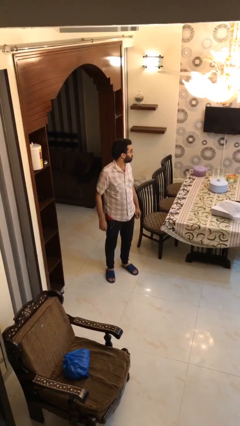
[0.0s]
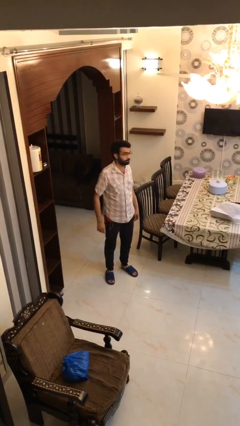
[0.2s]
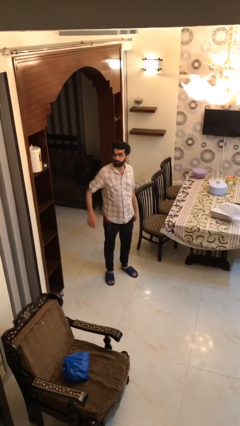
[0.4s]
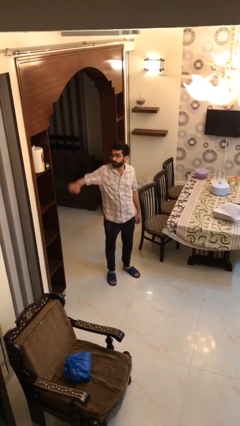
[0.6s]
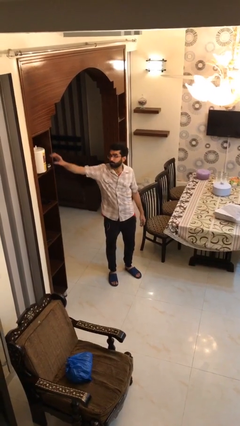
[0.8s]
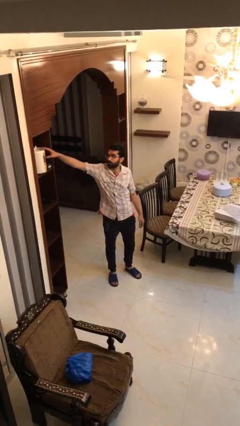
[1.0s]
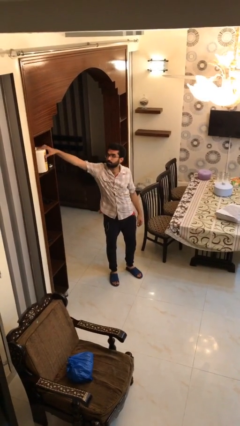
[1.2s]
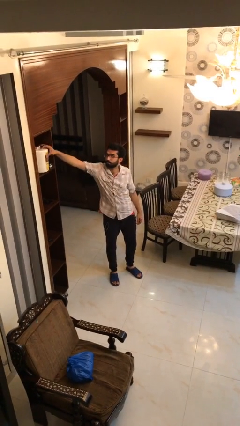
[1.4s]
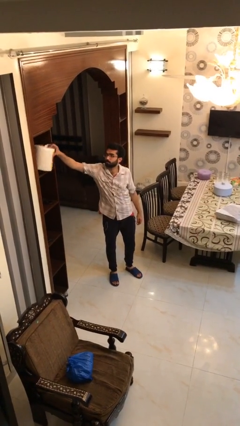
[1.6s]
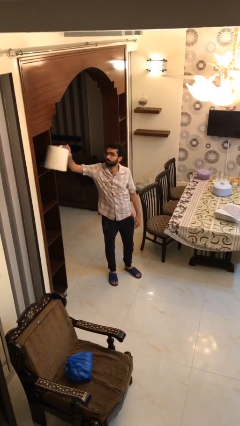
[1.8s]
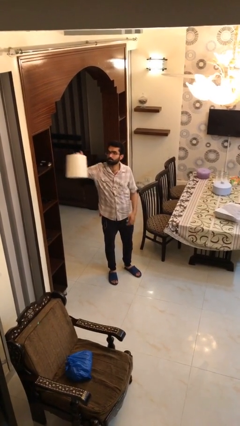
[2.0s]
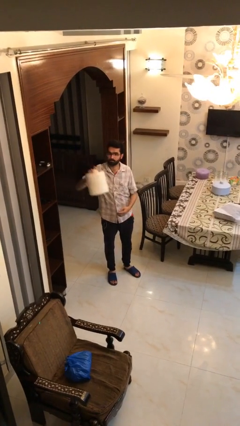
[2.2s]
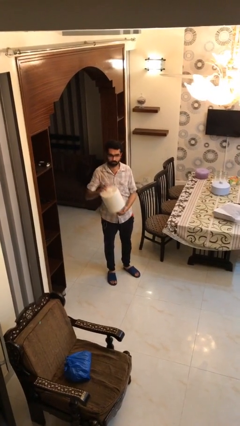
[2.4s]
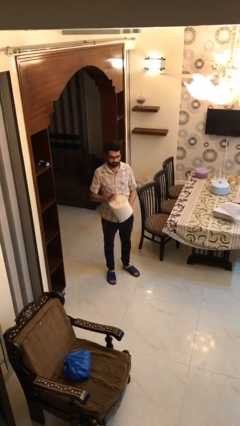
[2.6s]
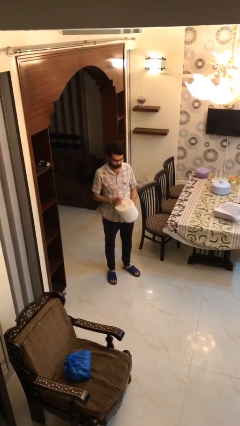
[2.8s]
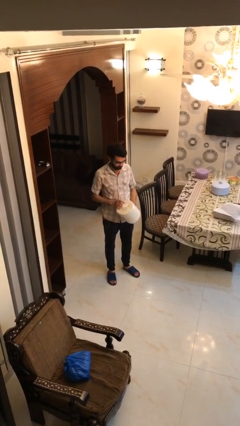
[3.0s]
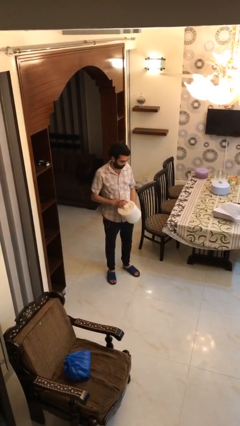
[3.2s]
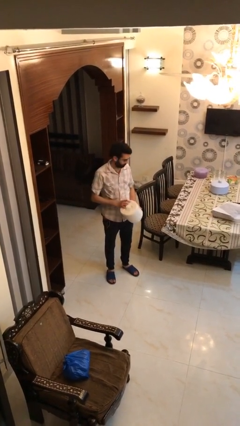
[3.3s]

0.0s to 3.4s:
person picks up object from shelf

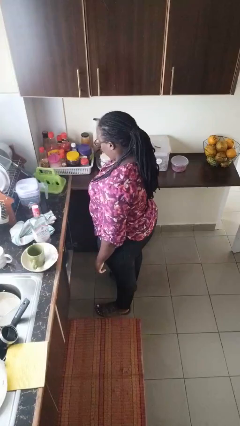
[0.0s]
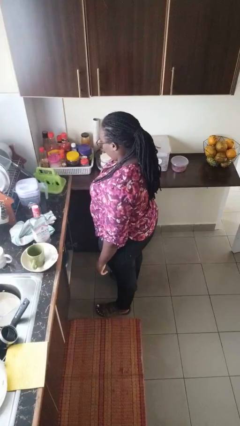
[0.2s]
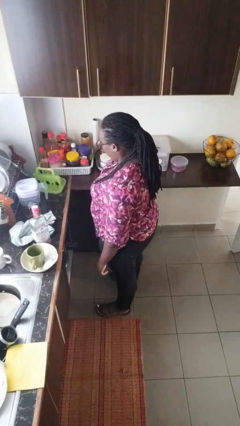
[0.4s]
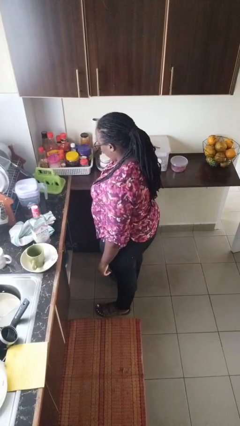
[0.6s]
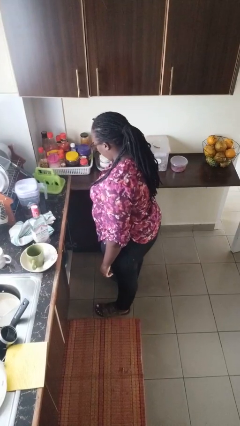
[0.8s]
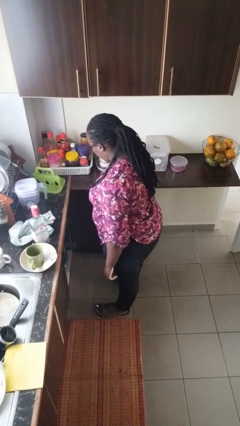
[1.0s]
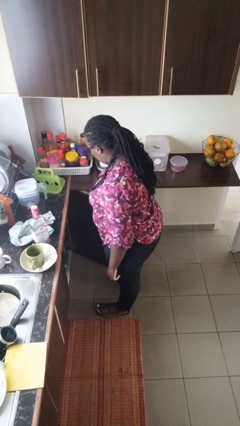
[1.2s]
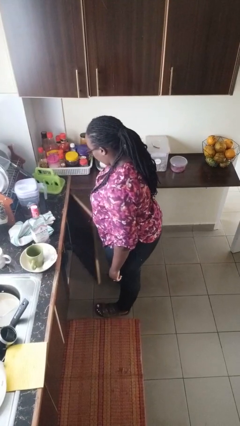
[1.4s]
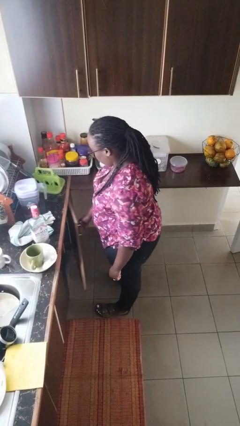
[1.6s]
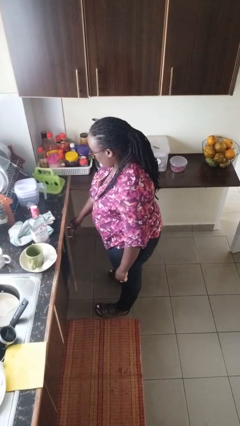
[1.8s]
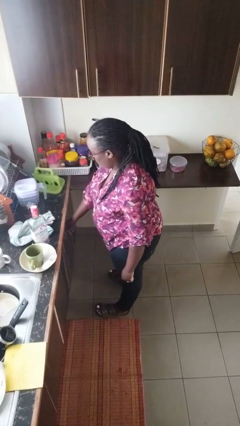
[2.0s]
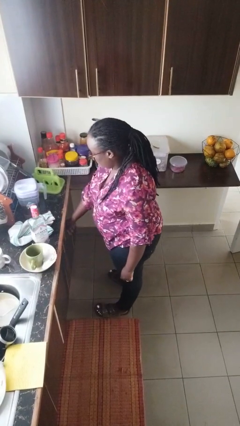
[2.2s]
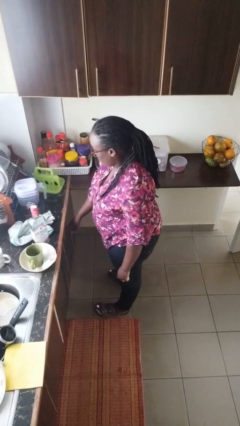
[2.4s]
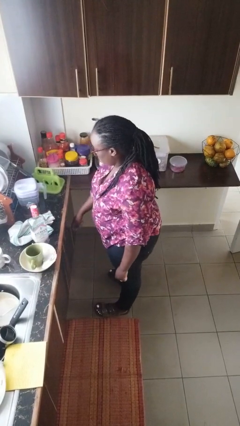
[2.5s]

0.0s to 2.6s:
person closes cabinet

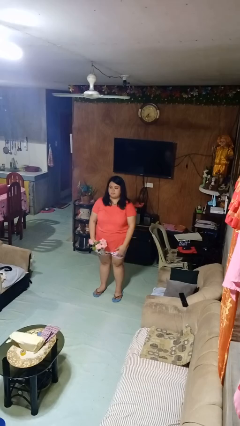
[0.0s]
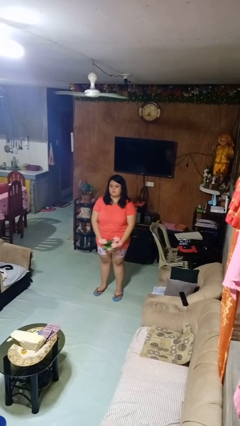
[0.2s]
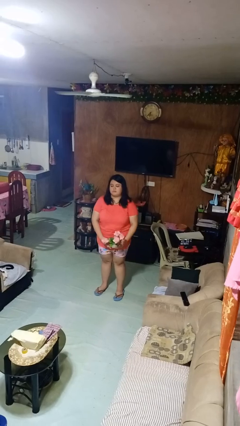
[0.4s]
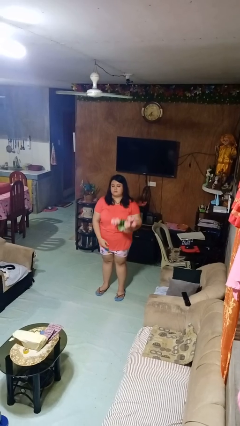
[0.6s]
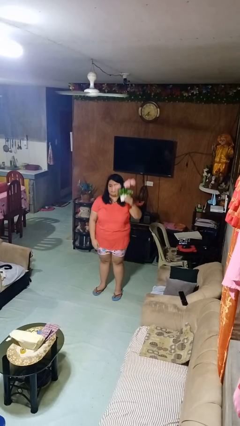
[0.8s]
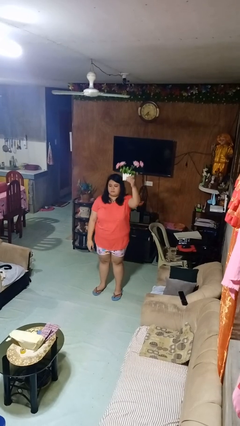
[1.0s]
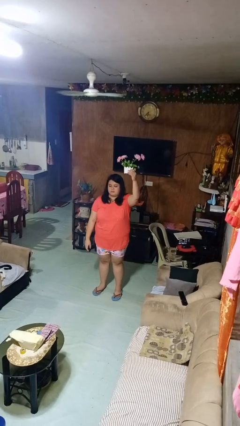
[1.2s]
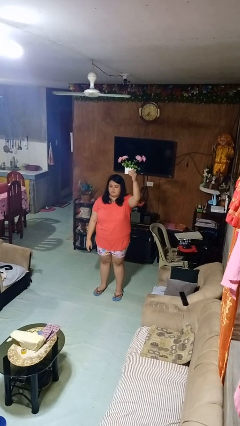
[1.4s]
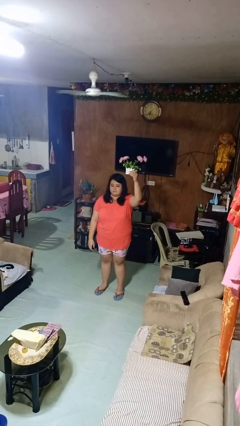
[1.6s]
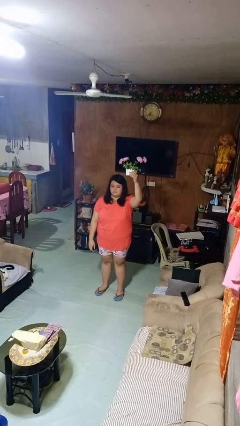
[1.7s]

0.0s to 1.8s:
person holds object above head

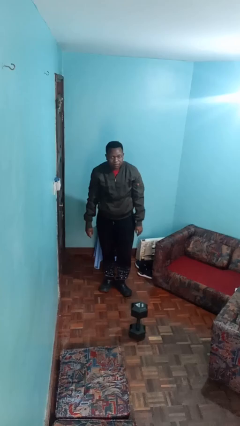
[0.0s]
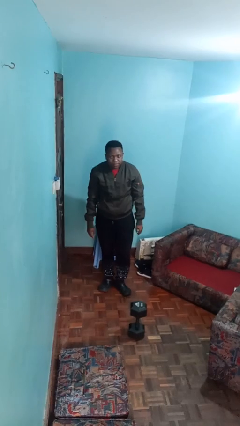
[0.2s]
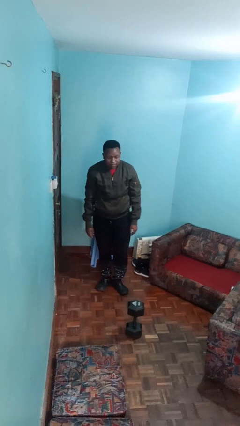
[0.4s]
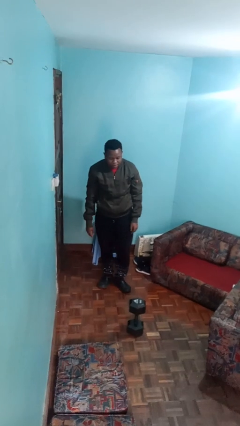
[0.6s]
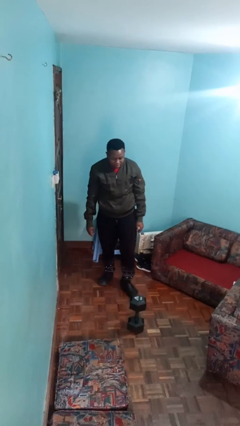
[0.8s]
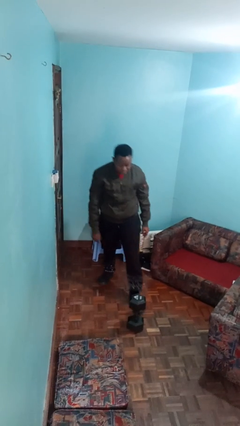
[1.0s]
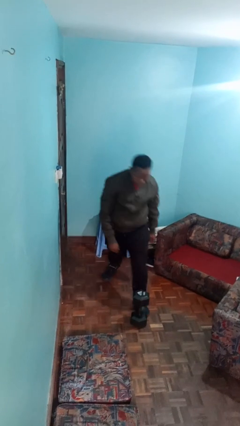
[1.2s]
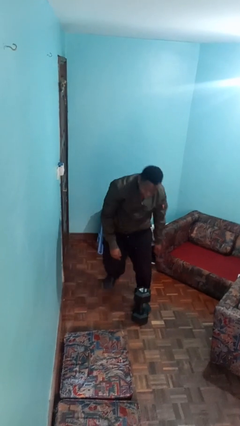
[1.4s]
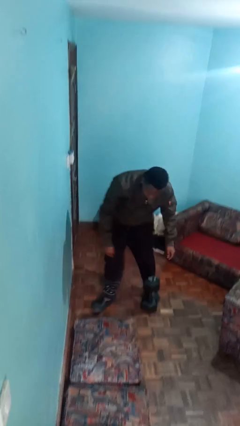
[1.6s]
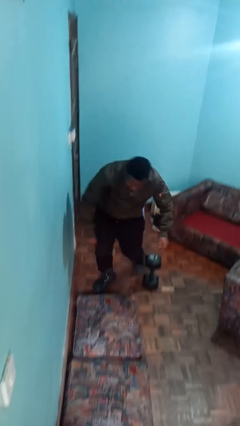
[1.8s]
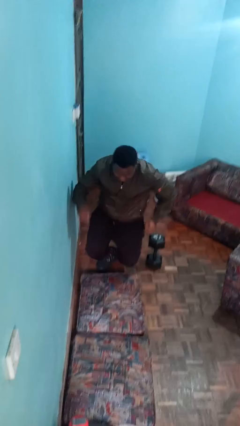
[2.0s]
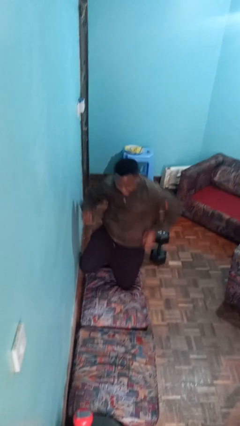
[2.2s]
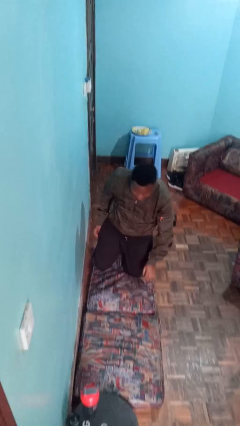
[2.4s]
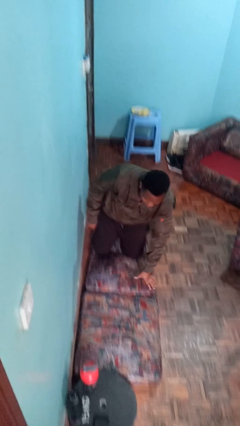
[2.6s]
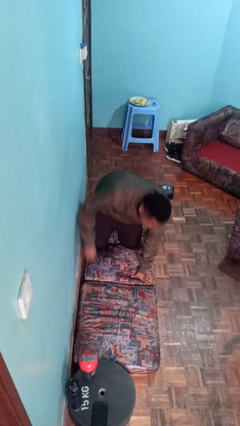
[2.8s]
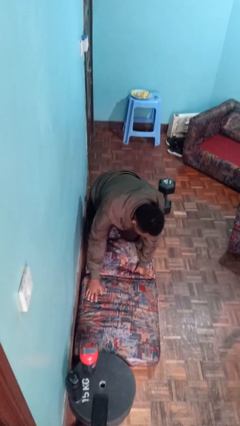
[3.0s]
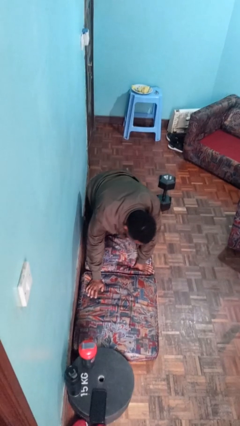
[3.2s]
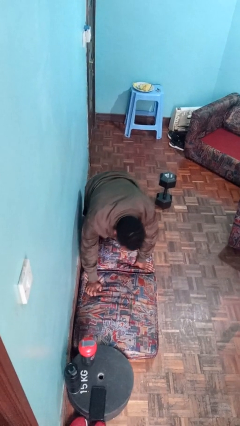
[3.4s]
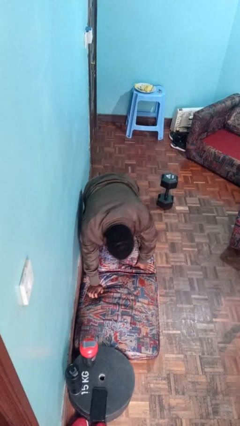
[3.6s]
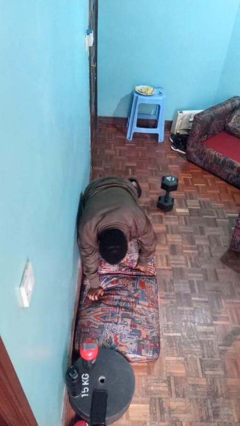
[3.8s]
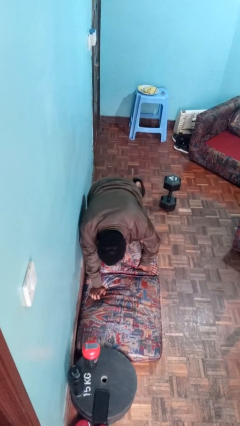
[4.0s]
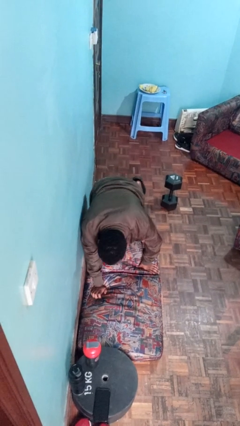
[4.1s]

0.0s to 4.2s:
person trips on object on floor

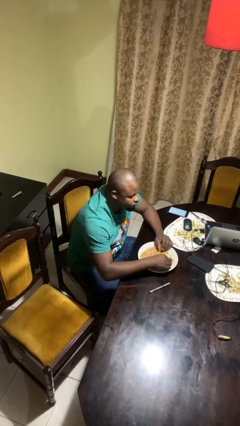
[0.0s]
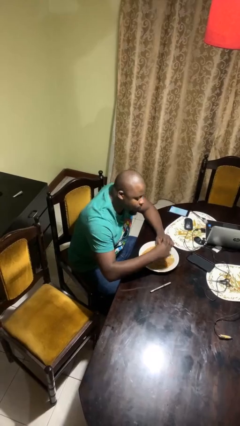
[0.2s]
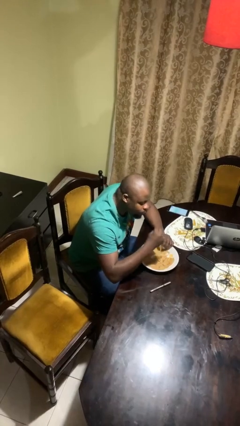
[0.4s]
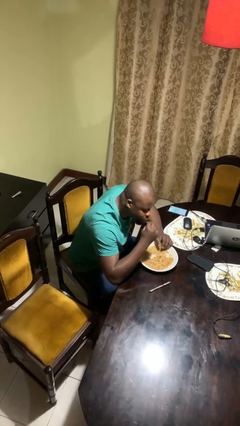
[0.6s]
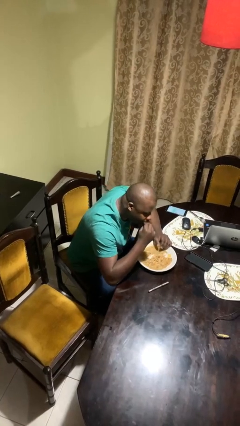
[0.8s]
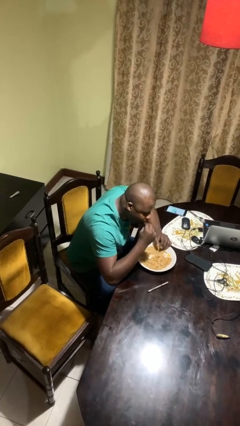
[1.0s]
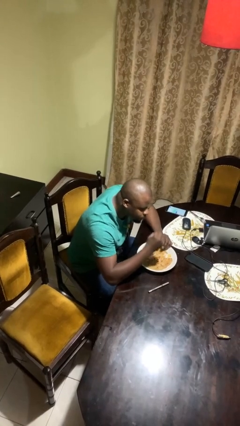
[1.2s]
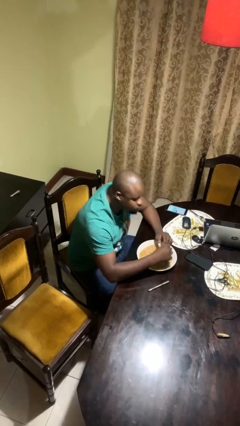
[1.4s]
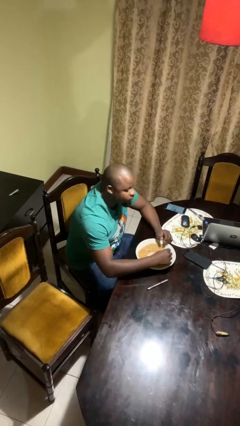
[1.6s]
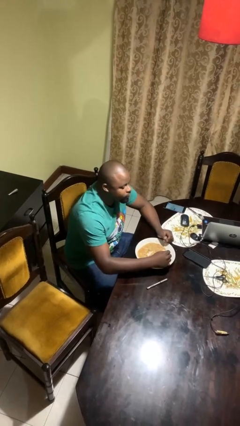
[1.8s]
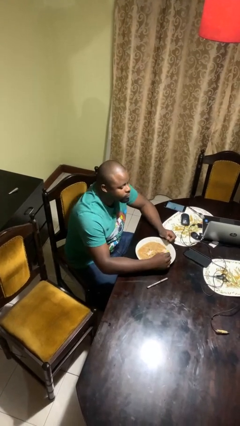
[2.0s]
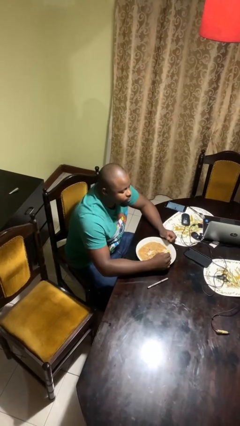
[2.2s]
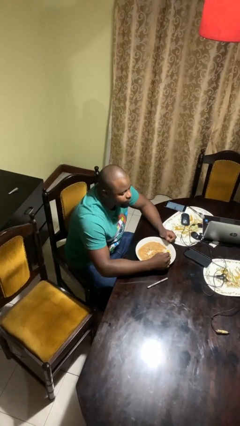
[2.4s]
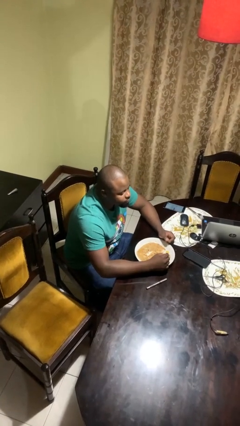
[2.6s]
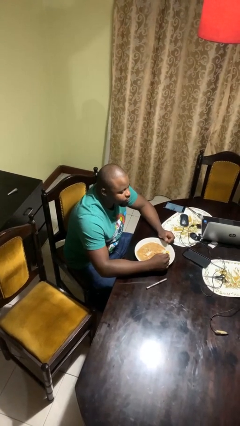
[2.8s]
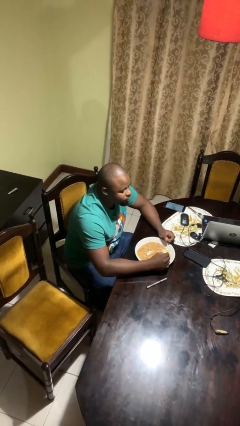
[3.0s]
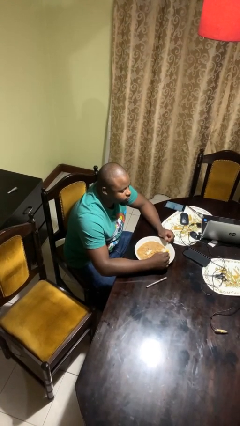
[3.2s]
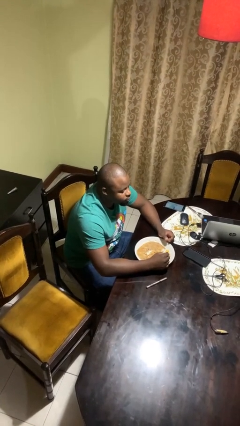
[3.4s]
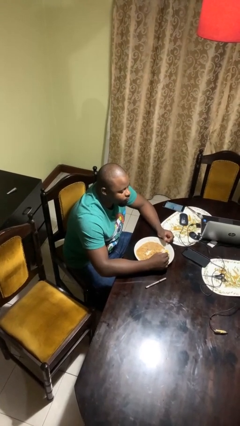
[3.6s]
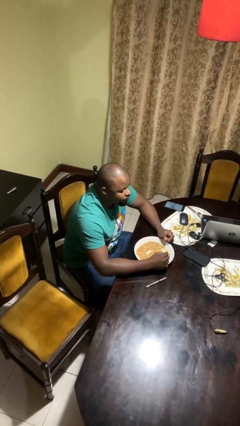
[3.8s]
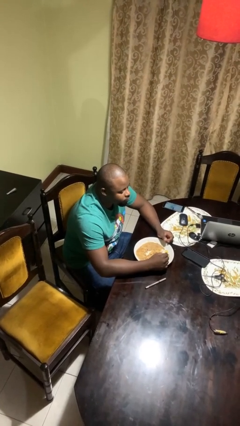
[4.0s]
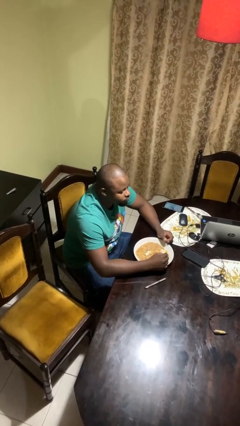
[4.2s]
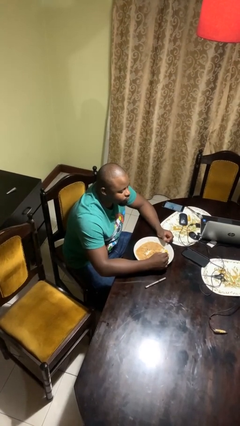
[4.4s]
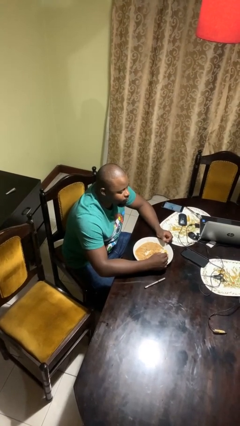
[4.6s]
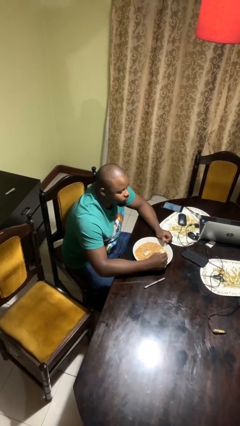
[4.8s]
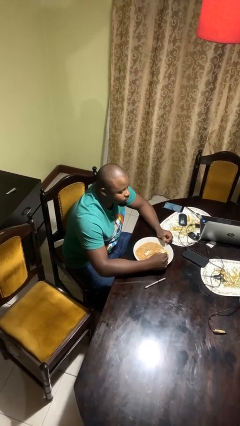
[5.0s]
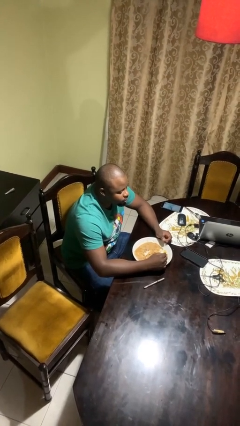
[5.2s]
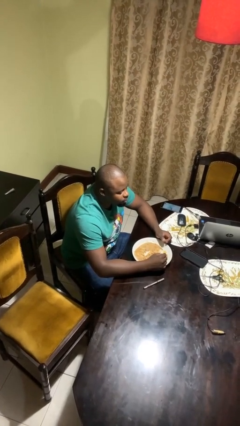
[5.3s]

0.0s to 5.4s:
person eats with hands

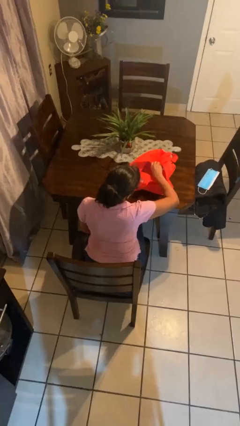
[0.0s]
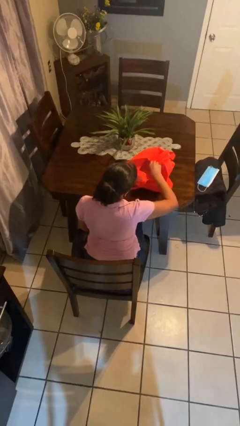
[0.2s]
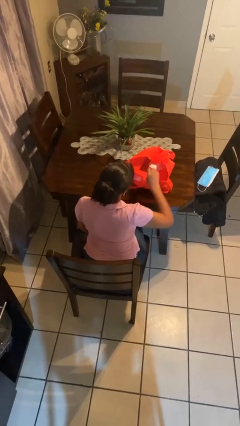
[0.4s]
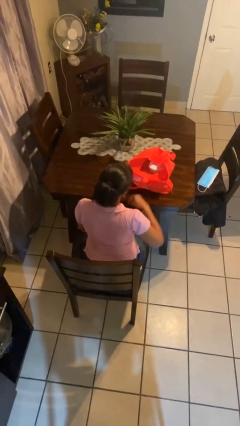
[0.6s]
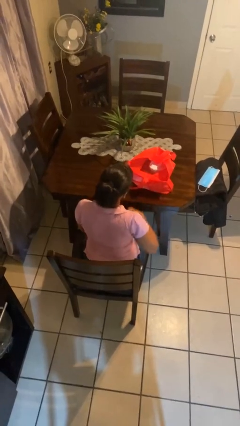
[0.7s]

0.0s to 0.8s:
person puts object into bag
